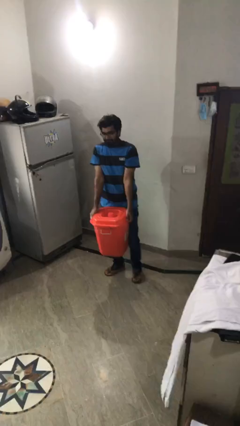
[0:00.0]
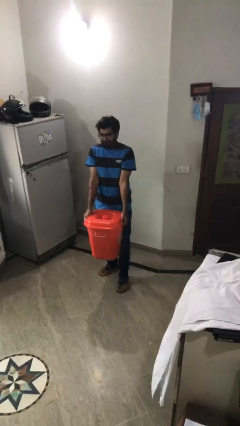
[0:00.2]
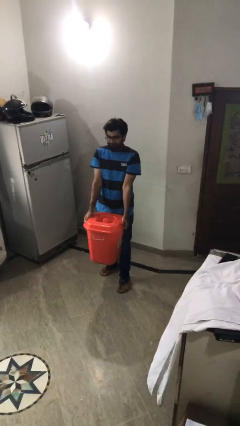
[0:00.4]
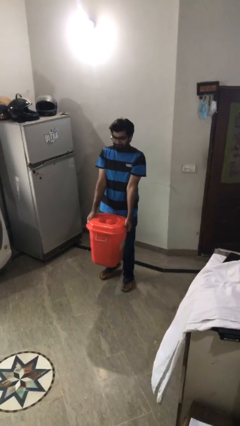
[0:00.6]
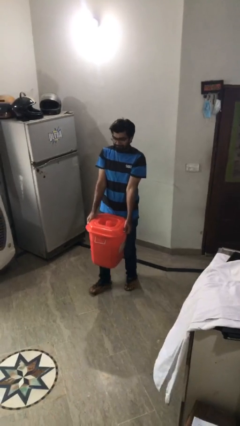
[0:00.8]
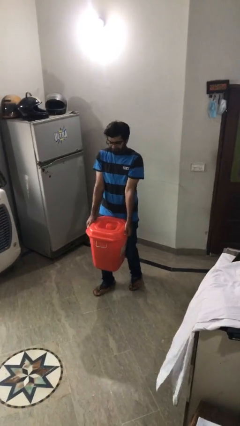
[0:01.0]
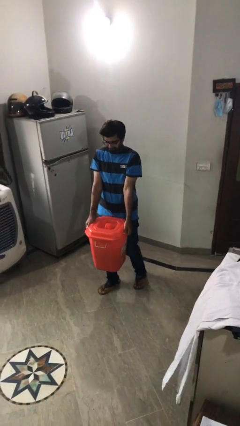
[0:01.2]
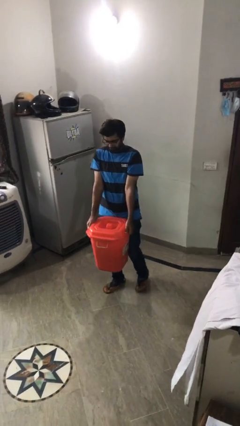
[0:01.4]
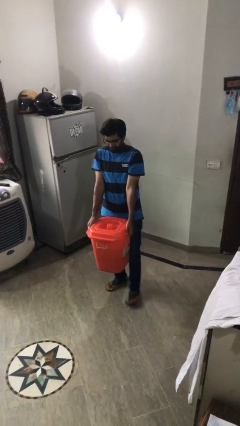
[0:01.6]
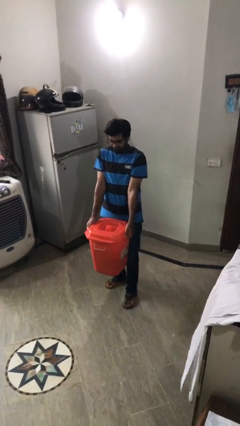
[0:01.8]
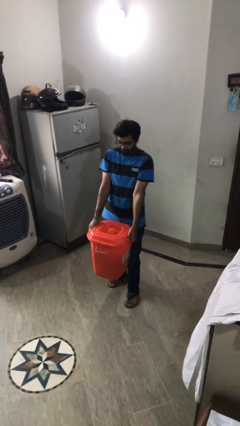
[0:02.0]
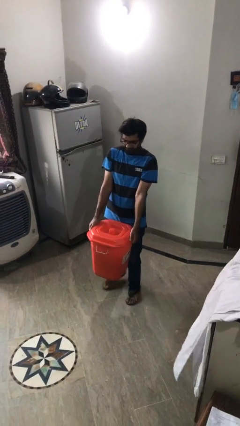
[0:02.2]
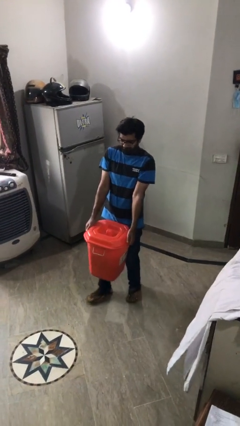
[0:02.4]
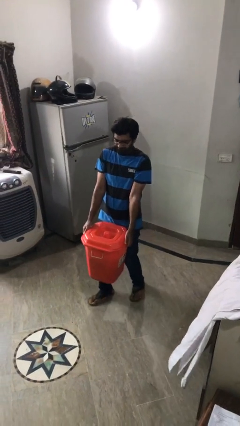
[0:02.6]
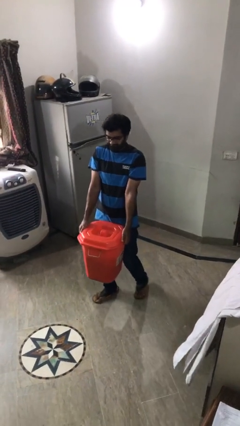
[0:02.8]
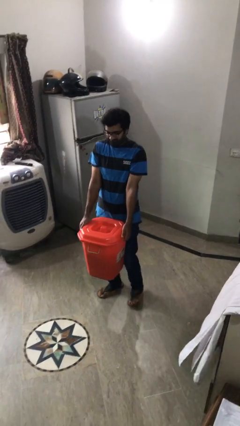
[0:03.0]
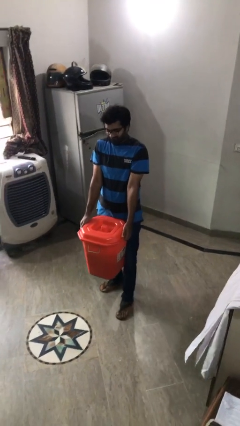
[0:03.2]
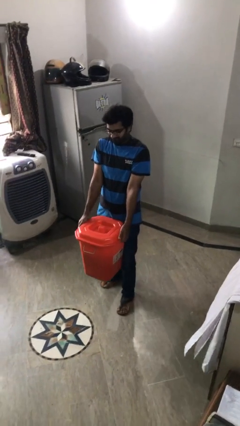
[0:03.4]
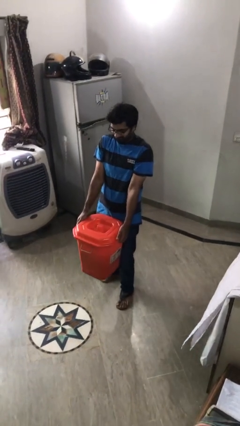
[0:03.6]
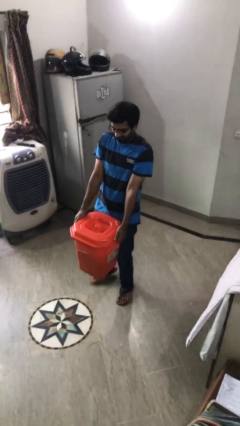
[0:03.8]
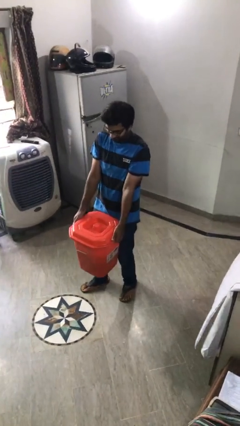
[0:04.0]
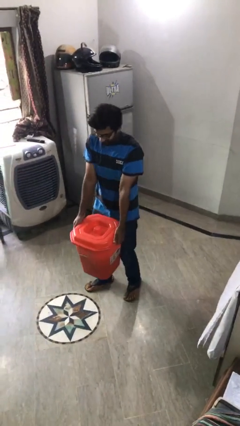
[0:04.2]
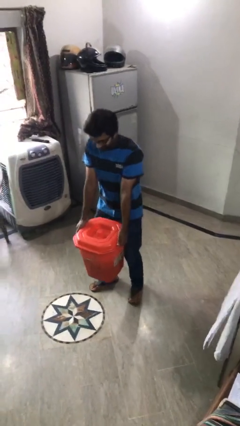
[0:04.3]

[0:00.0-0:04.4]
person carries heavy object

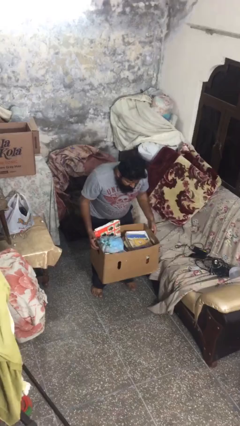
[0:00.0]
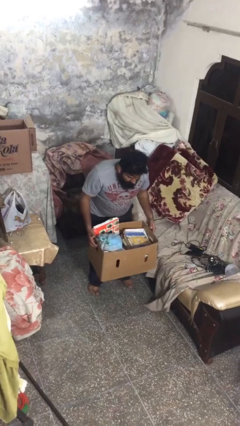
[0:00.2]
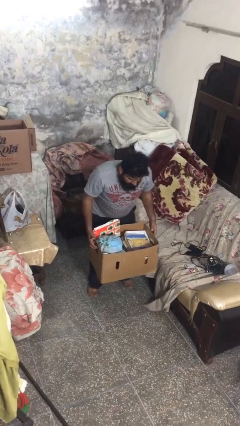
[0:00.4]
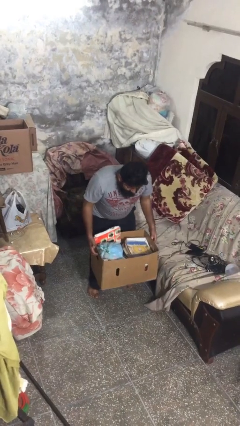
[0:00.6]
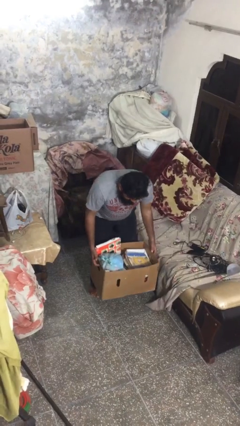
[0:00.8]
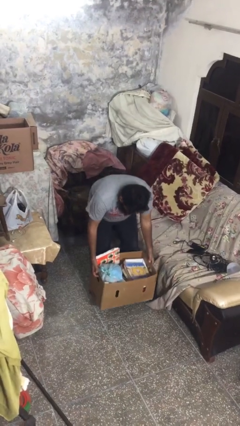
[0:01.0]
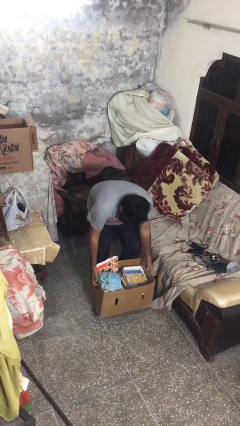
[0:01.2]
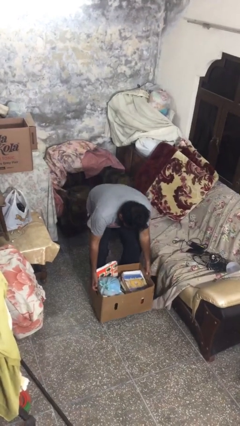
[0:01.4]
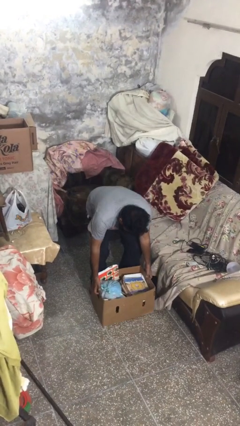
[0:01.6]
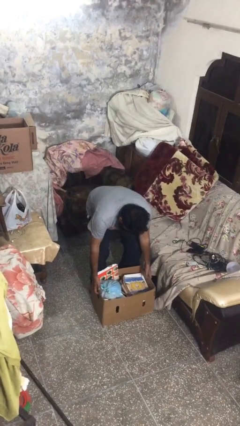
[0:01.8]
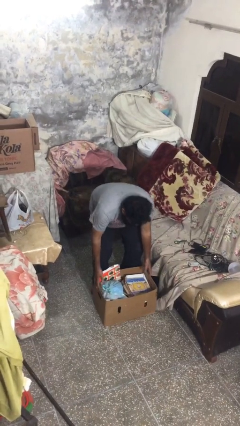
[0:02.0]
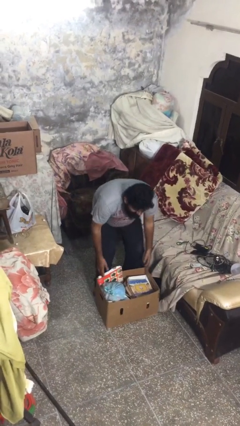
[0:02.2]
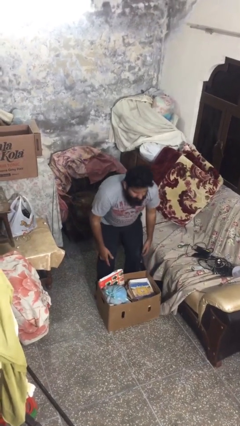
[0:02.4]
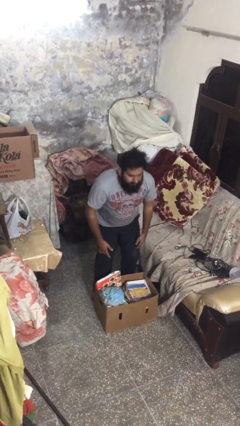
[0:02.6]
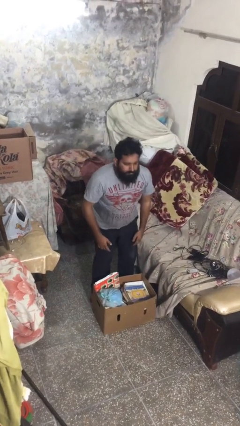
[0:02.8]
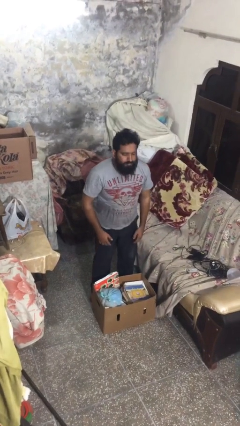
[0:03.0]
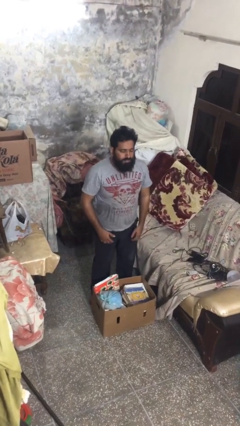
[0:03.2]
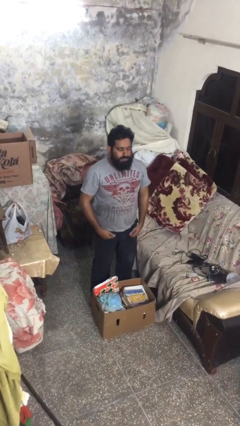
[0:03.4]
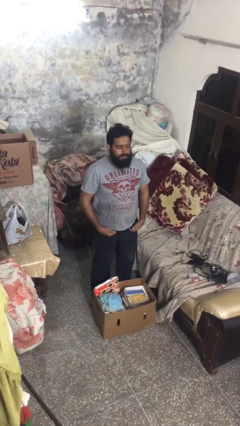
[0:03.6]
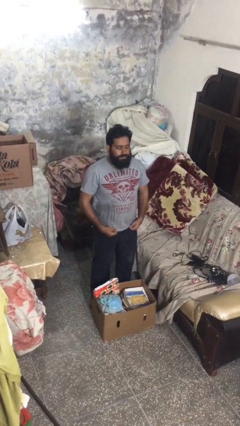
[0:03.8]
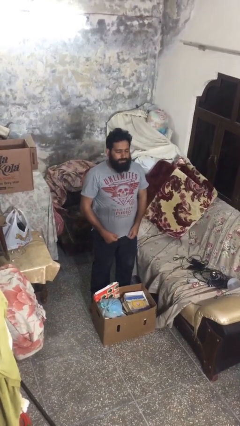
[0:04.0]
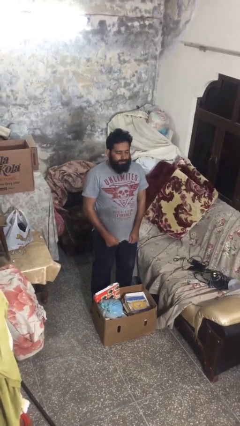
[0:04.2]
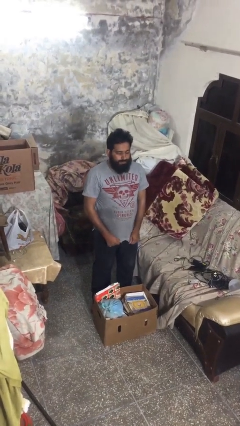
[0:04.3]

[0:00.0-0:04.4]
person puts down object on floor

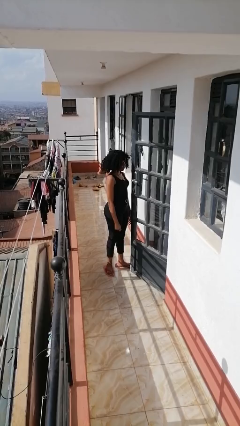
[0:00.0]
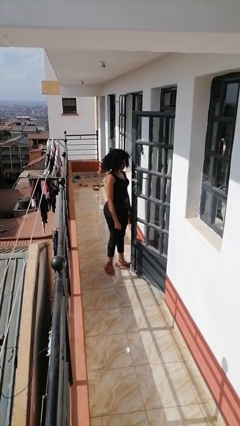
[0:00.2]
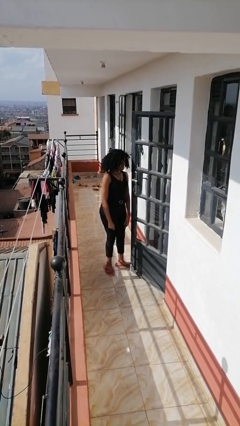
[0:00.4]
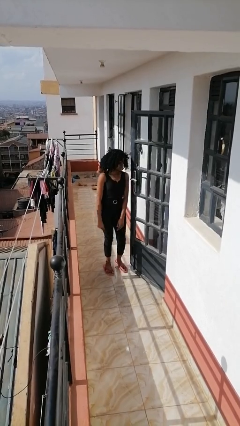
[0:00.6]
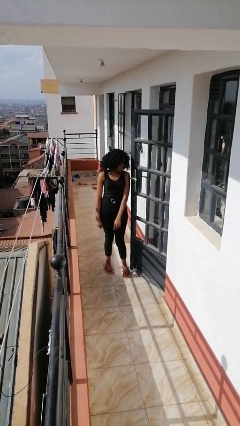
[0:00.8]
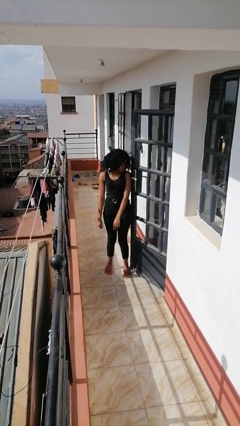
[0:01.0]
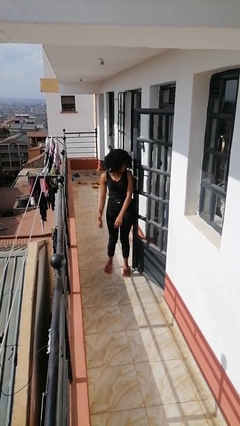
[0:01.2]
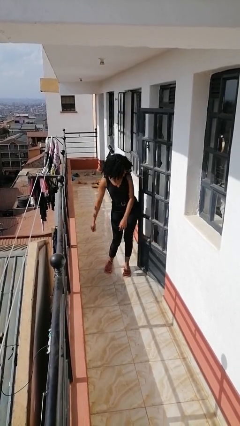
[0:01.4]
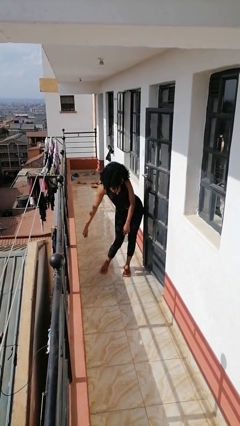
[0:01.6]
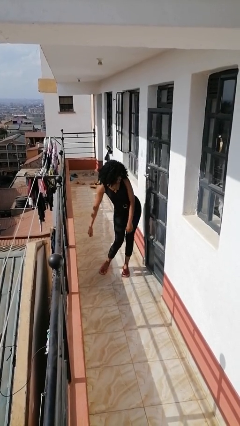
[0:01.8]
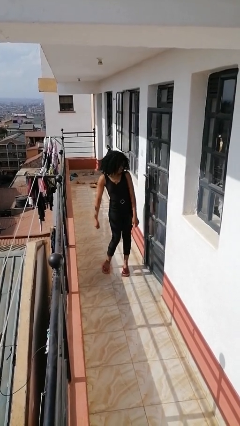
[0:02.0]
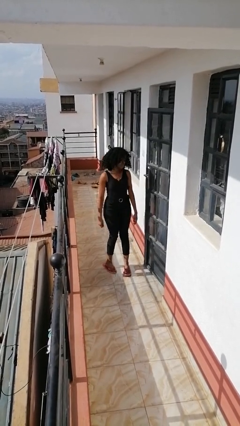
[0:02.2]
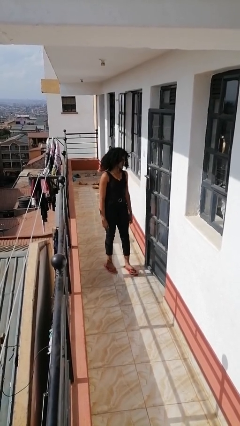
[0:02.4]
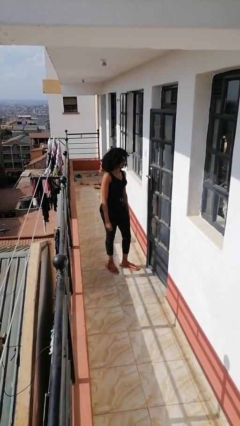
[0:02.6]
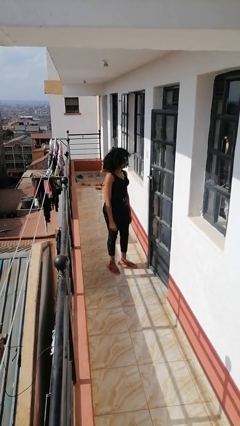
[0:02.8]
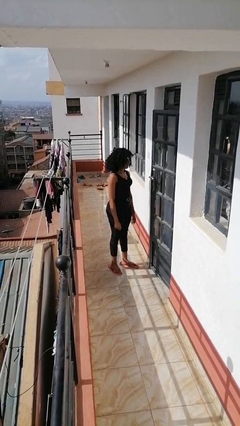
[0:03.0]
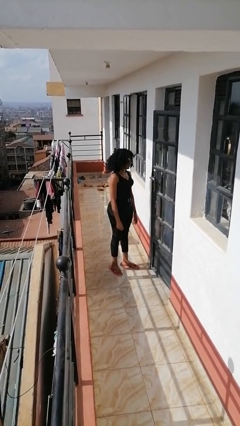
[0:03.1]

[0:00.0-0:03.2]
person closes door with hip

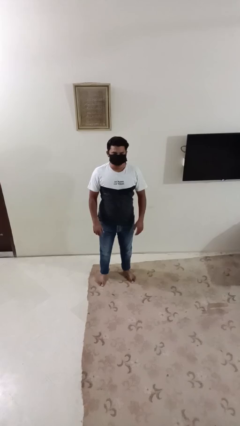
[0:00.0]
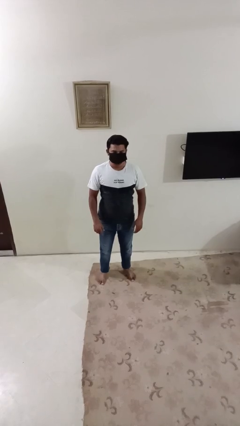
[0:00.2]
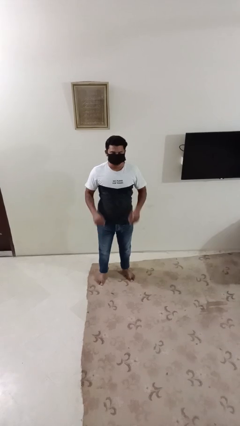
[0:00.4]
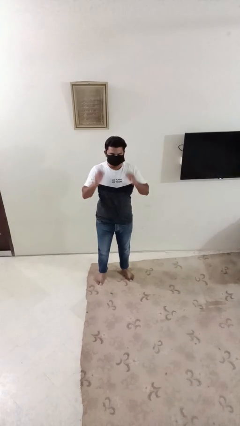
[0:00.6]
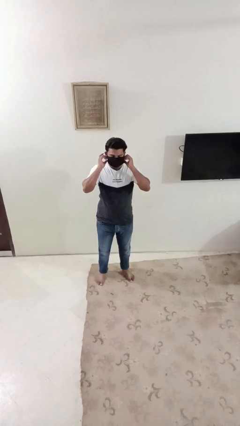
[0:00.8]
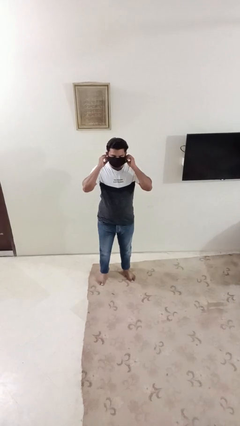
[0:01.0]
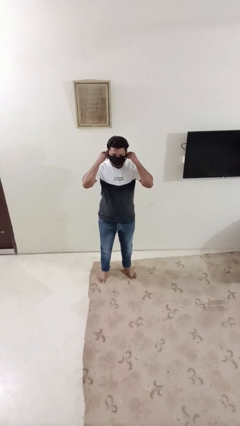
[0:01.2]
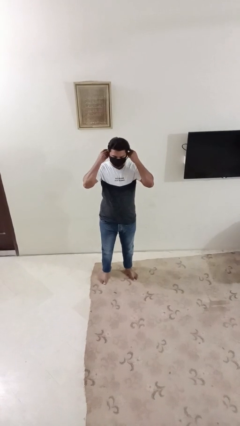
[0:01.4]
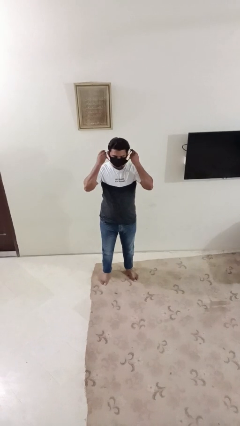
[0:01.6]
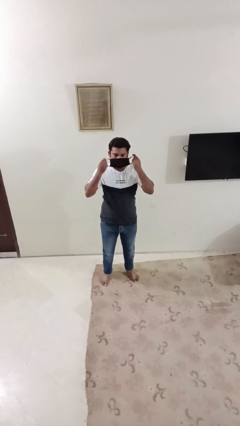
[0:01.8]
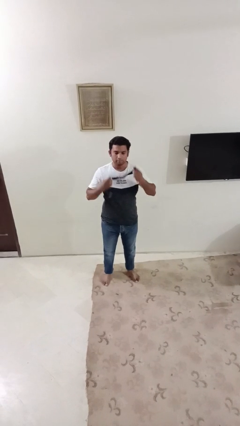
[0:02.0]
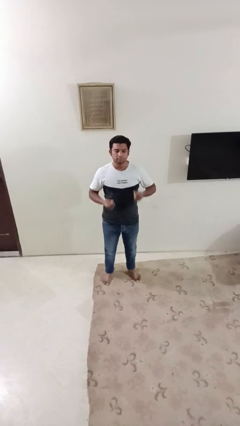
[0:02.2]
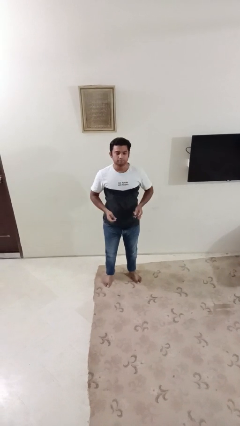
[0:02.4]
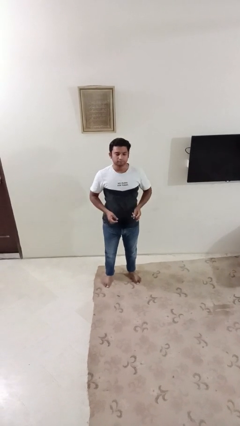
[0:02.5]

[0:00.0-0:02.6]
person takes off facemask

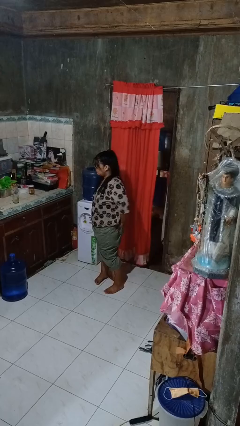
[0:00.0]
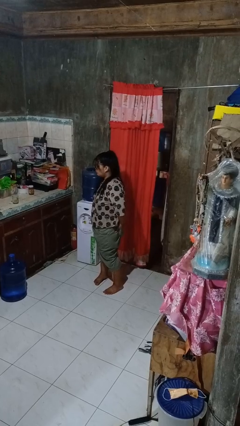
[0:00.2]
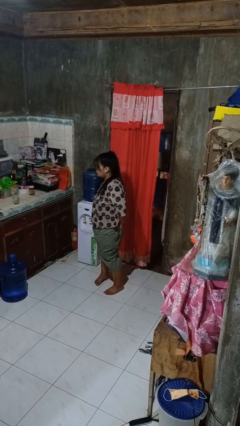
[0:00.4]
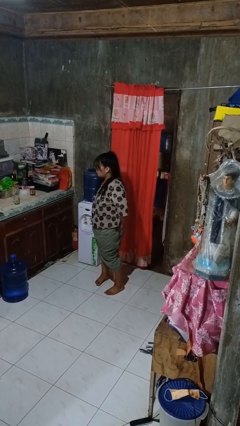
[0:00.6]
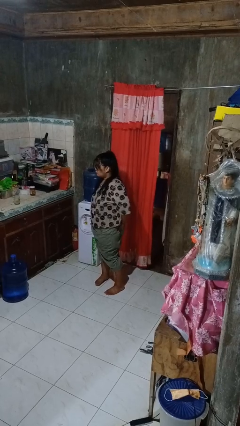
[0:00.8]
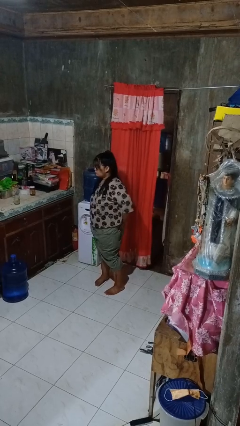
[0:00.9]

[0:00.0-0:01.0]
person puts hands in back pockets

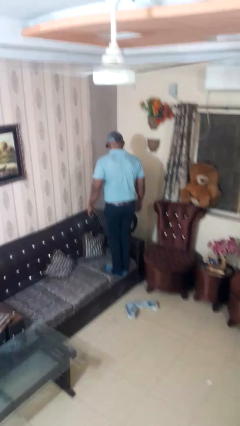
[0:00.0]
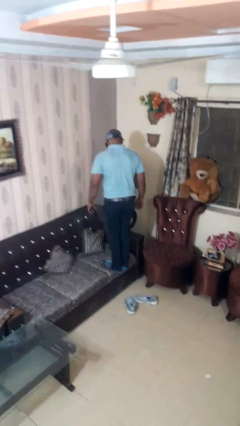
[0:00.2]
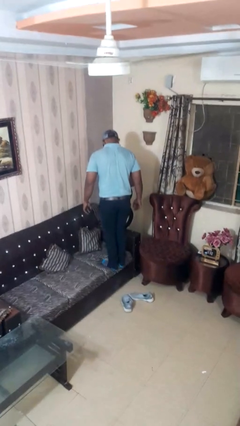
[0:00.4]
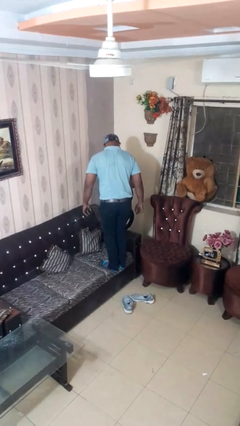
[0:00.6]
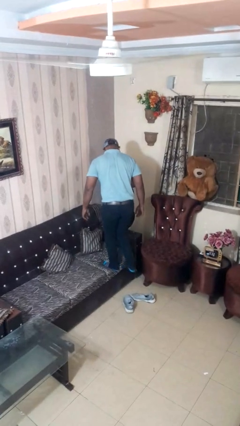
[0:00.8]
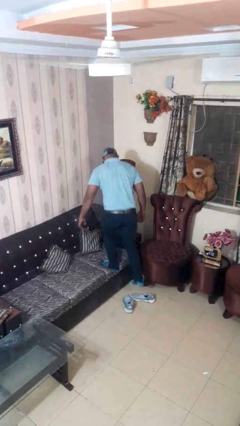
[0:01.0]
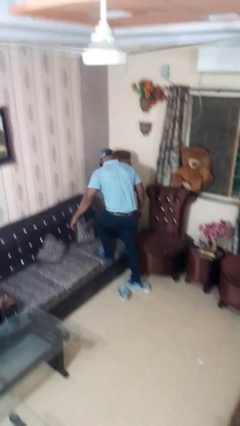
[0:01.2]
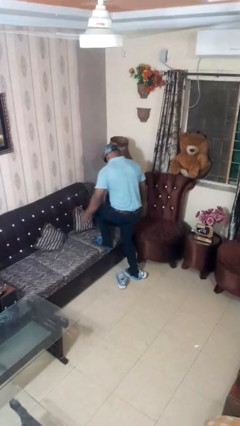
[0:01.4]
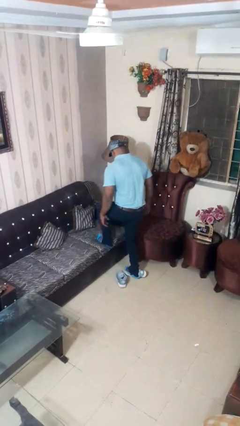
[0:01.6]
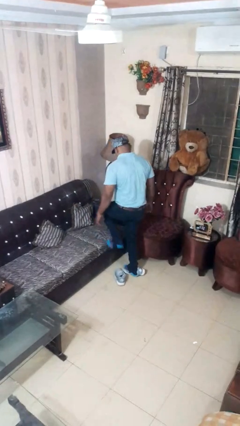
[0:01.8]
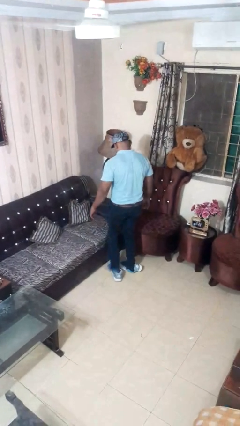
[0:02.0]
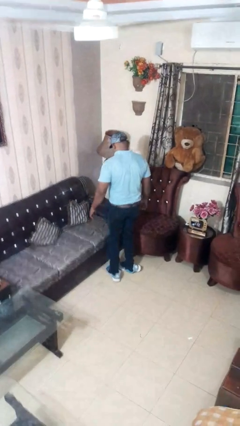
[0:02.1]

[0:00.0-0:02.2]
person climbs off couch
